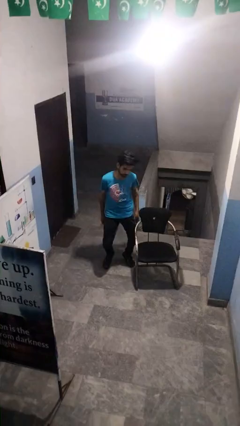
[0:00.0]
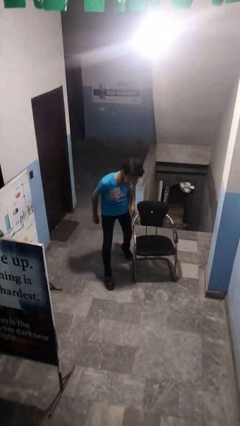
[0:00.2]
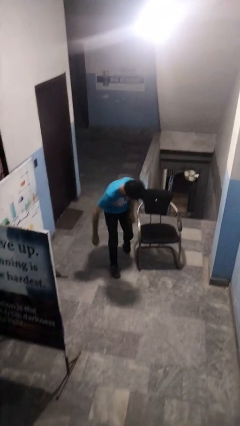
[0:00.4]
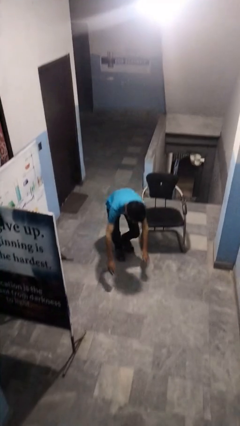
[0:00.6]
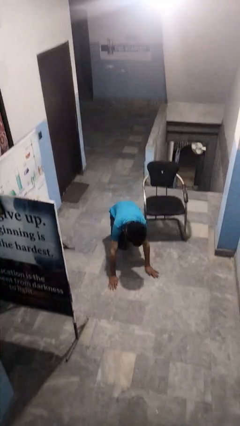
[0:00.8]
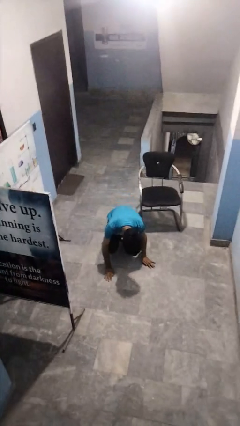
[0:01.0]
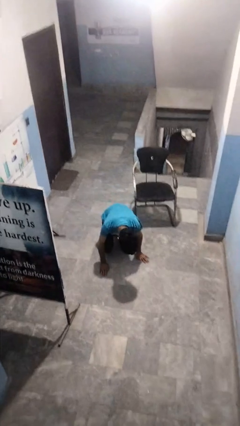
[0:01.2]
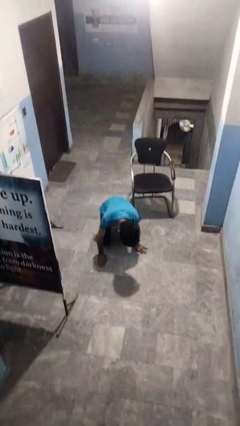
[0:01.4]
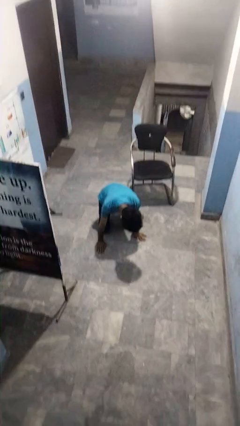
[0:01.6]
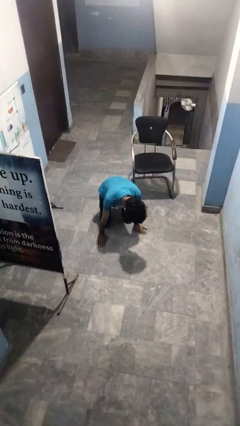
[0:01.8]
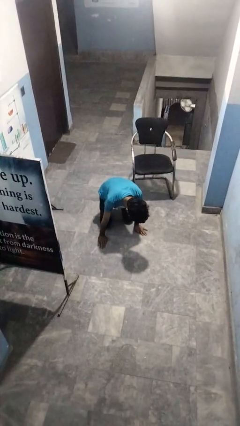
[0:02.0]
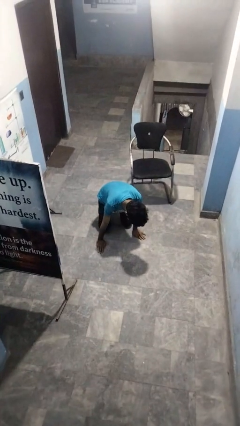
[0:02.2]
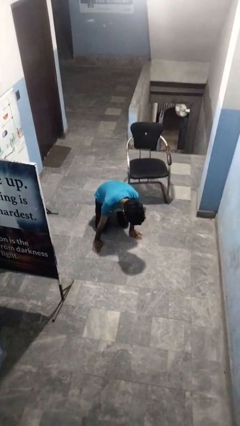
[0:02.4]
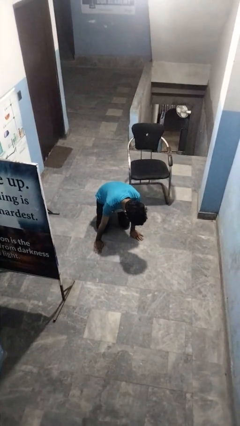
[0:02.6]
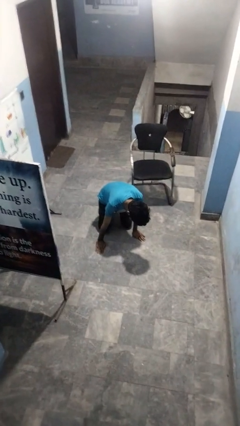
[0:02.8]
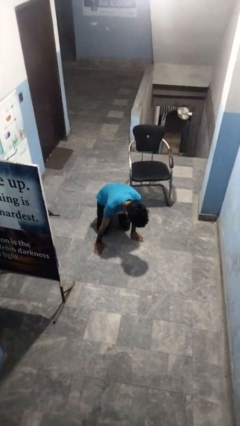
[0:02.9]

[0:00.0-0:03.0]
person trips on object on floor

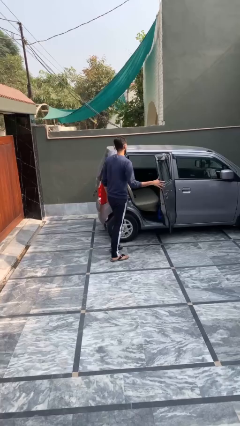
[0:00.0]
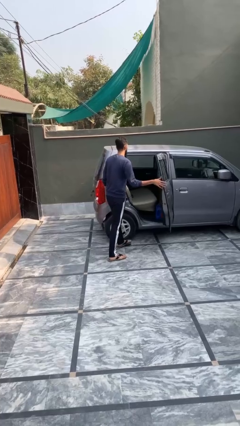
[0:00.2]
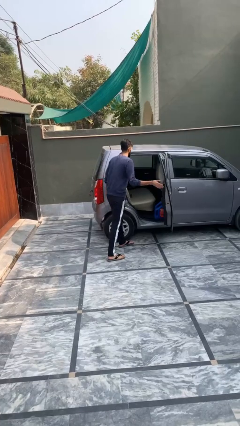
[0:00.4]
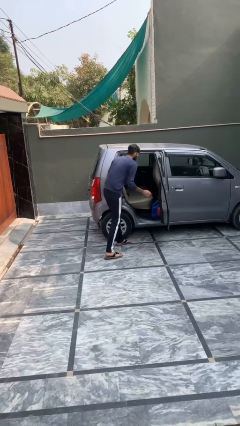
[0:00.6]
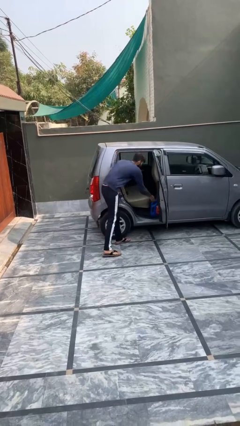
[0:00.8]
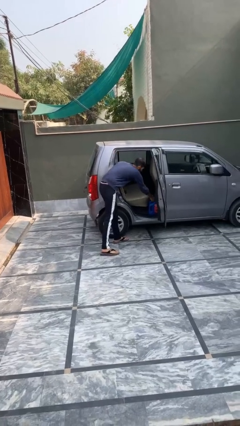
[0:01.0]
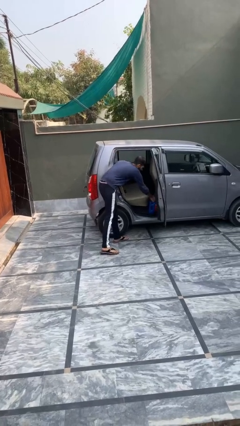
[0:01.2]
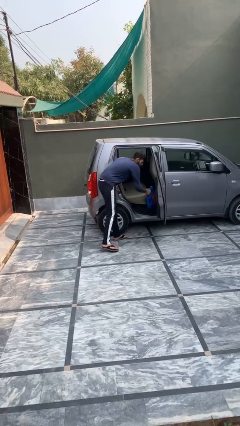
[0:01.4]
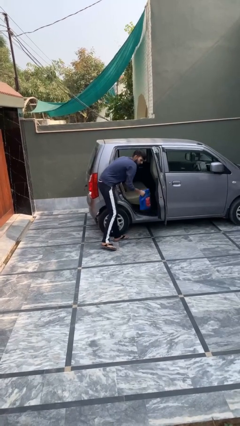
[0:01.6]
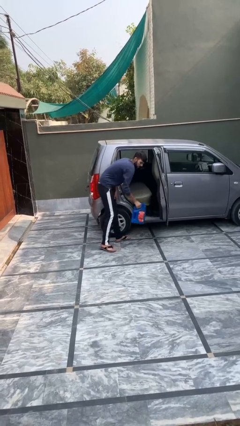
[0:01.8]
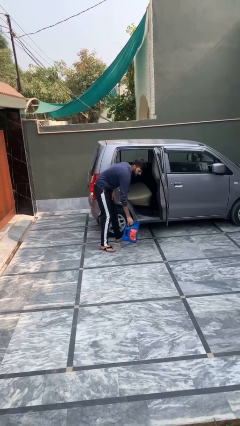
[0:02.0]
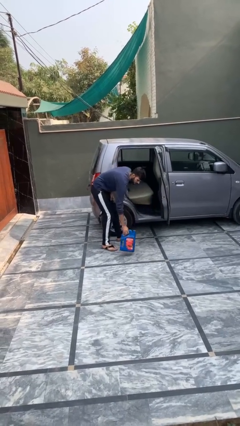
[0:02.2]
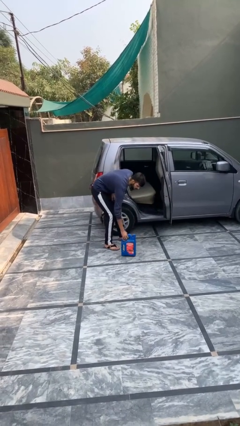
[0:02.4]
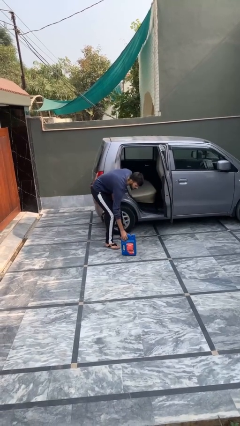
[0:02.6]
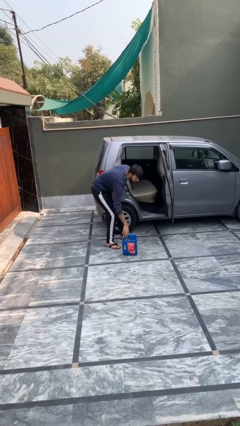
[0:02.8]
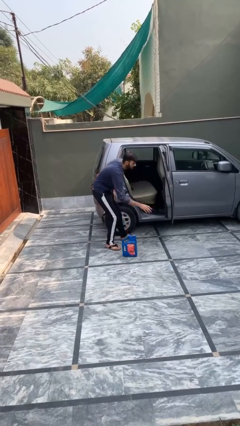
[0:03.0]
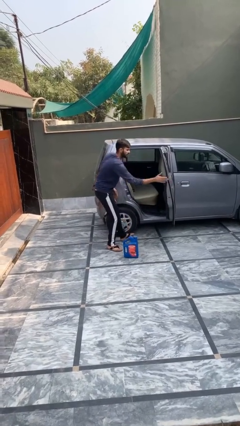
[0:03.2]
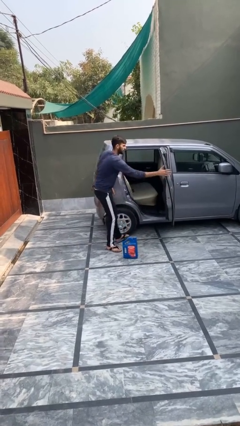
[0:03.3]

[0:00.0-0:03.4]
person unloads car

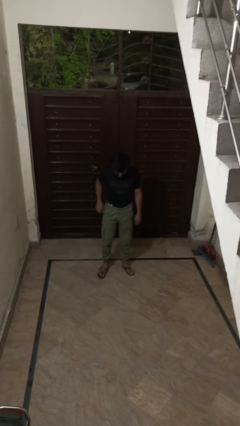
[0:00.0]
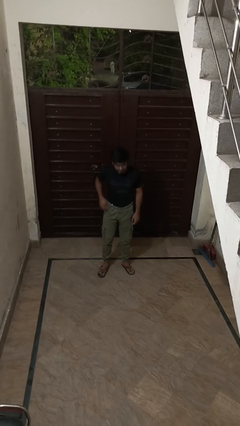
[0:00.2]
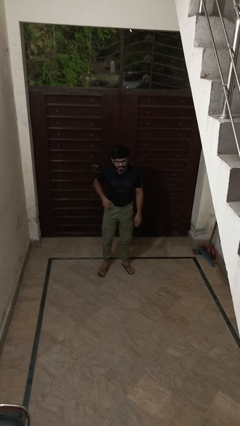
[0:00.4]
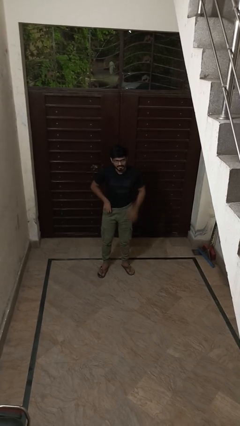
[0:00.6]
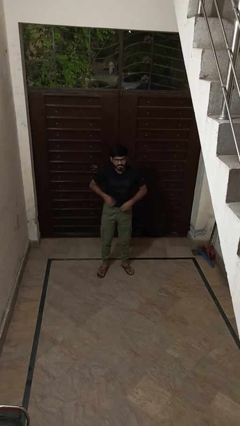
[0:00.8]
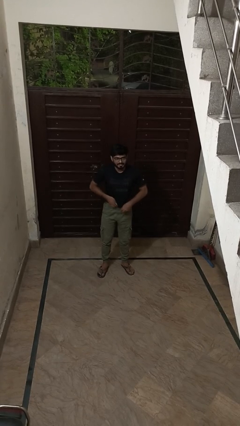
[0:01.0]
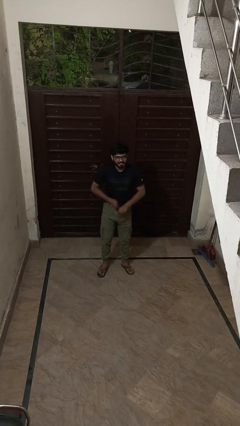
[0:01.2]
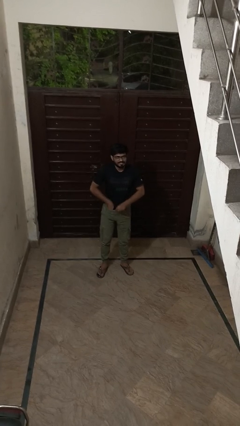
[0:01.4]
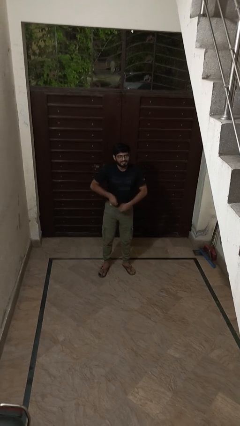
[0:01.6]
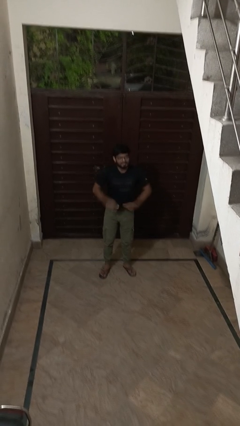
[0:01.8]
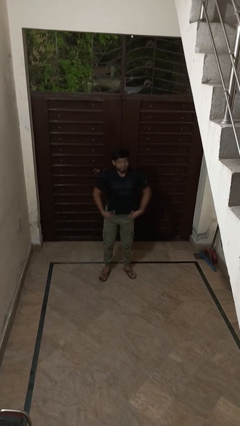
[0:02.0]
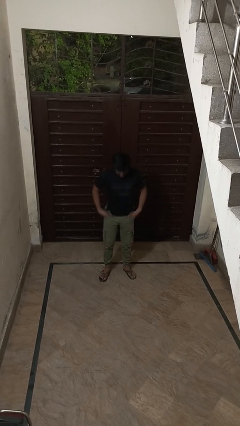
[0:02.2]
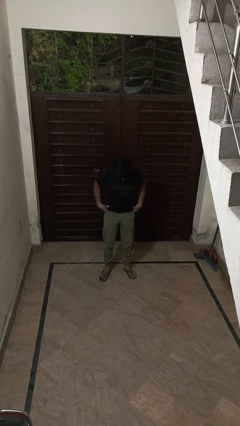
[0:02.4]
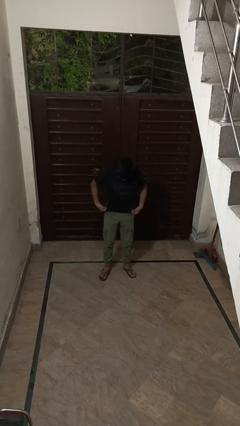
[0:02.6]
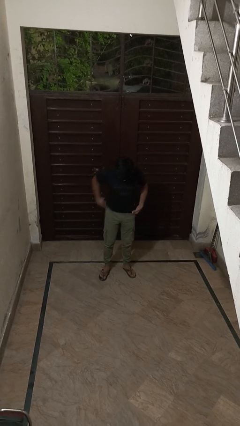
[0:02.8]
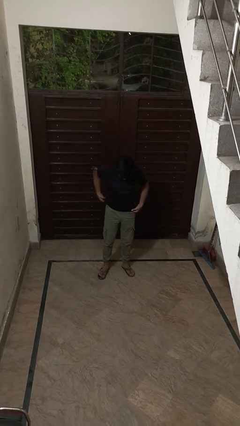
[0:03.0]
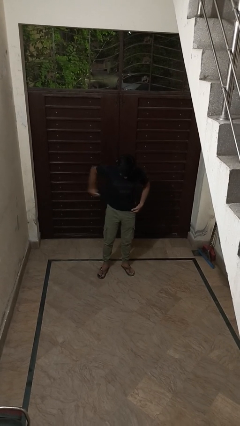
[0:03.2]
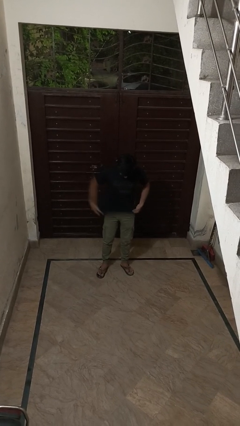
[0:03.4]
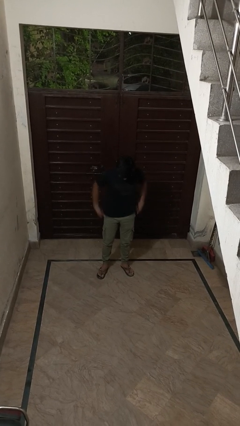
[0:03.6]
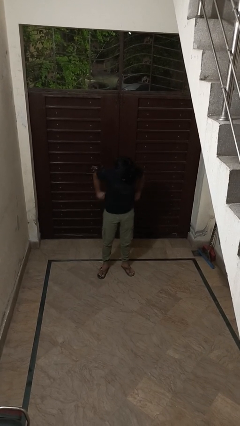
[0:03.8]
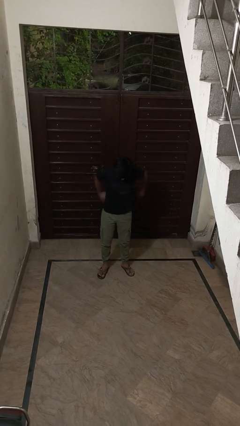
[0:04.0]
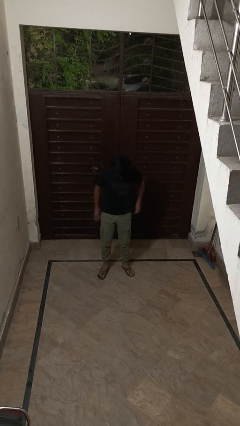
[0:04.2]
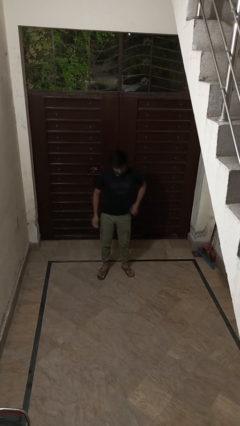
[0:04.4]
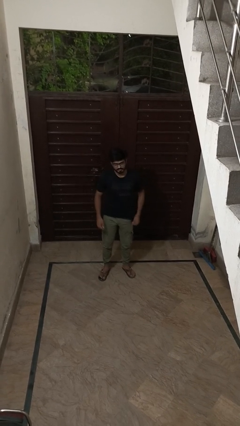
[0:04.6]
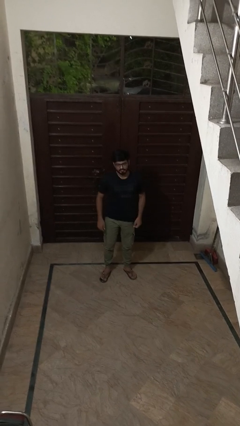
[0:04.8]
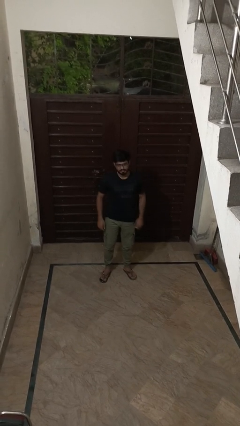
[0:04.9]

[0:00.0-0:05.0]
person untucks shirt

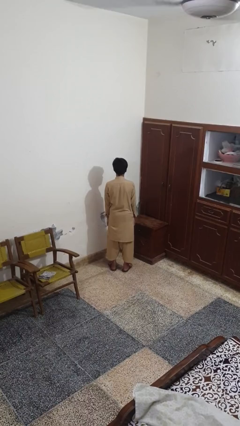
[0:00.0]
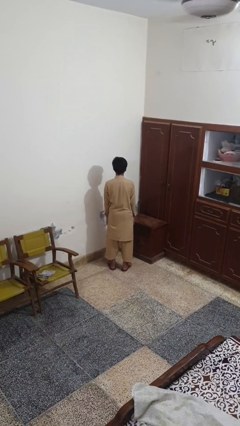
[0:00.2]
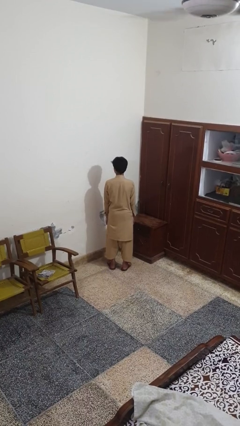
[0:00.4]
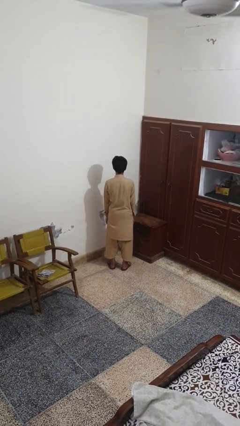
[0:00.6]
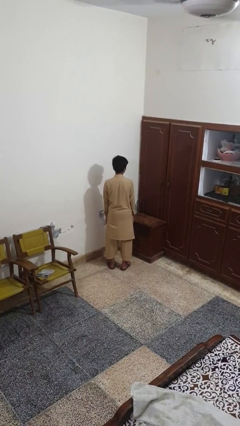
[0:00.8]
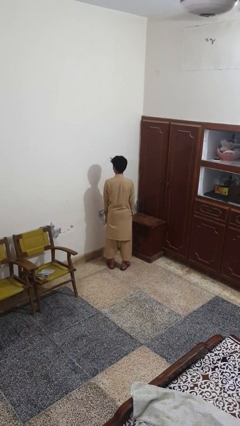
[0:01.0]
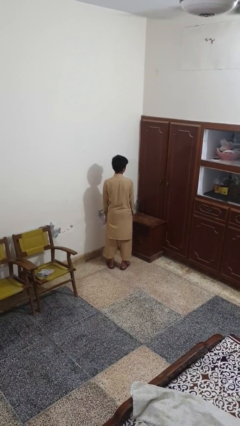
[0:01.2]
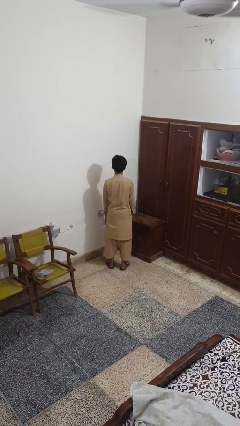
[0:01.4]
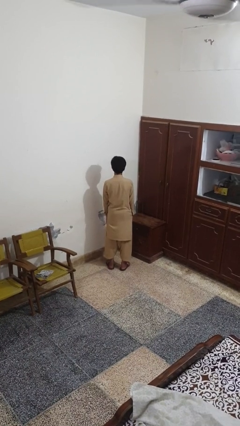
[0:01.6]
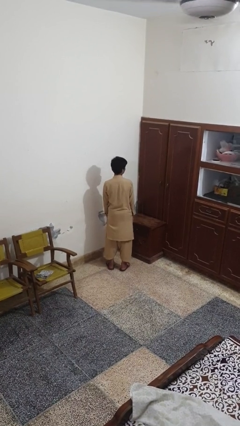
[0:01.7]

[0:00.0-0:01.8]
person shakes head

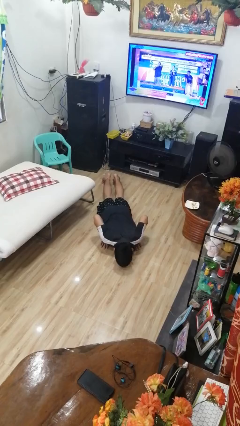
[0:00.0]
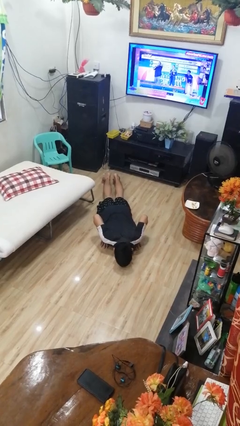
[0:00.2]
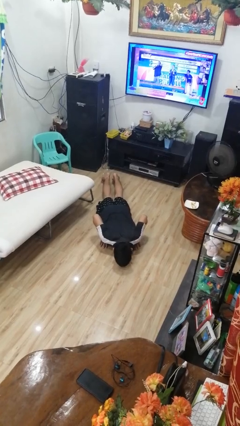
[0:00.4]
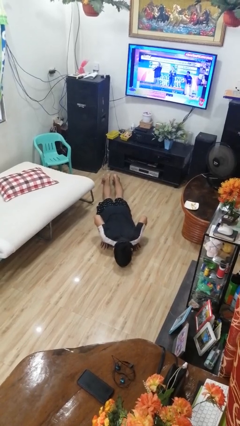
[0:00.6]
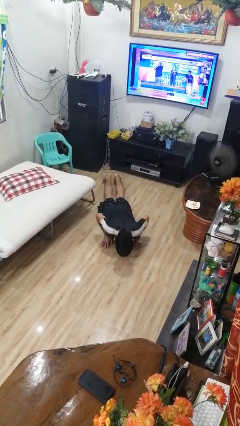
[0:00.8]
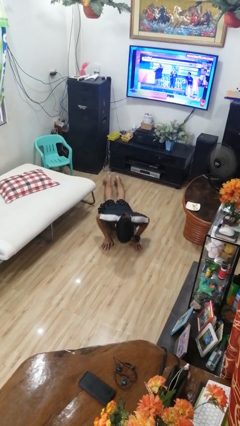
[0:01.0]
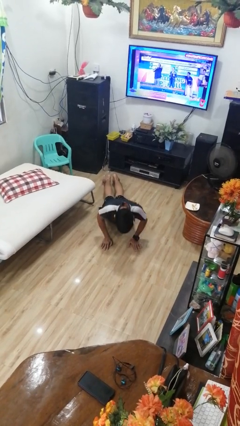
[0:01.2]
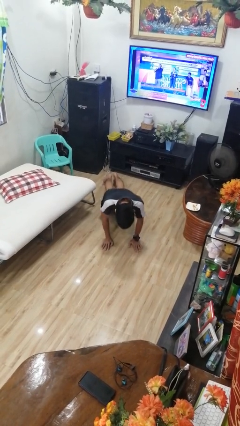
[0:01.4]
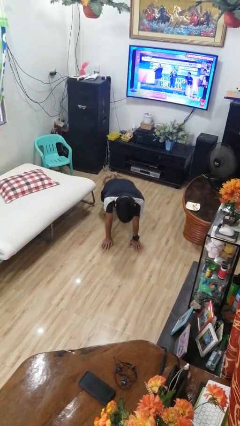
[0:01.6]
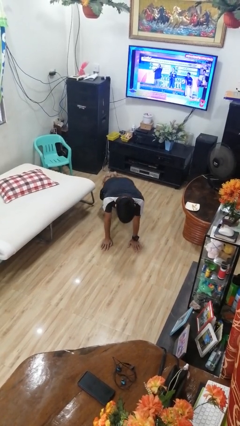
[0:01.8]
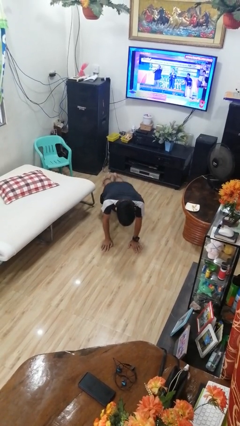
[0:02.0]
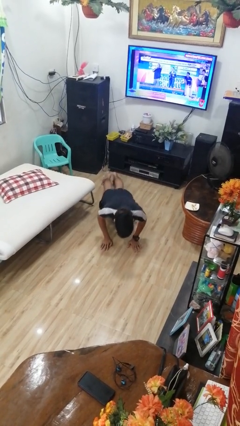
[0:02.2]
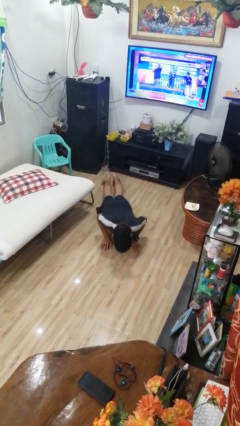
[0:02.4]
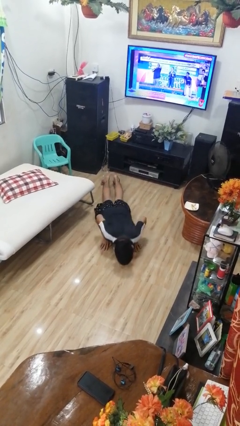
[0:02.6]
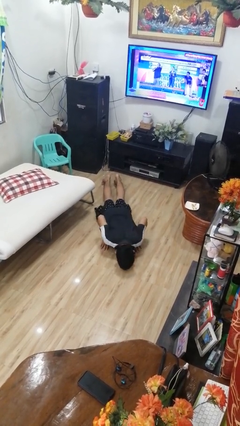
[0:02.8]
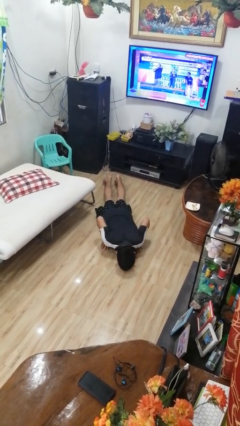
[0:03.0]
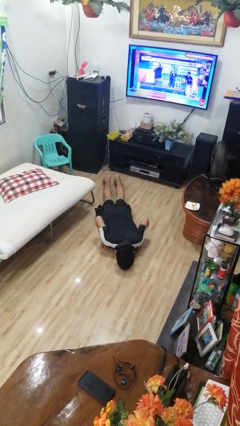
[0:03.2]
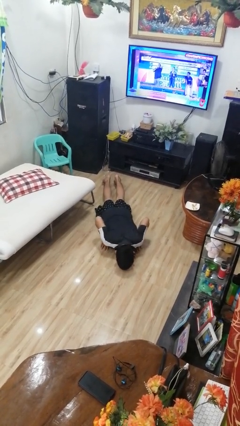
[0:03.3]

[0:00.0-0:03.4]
person exercises with pushup

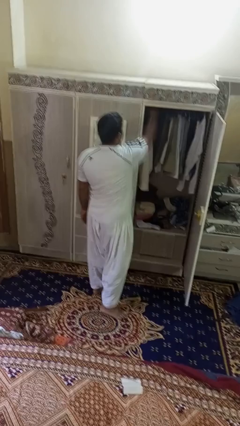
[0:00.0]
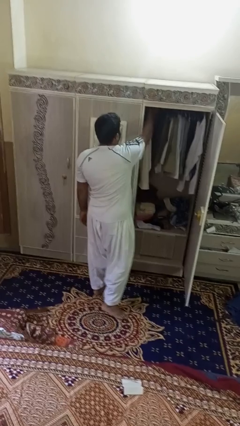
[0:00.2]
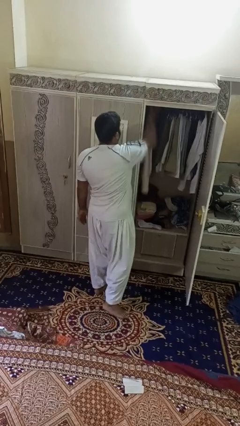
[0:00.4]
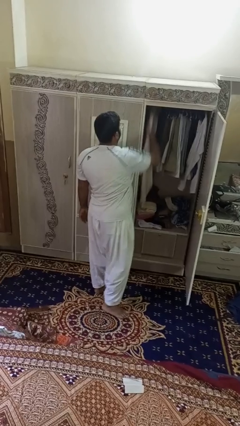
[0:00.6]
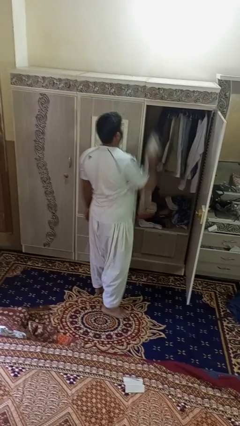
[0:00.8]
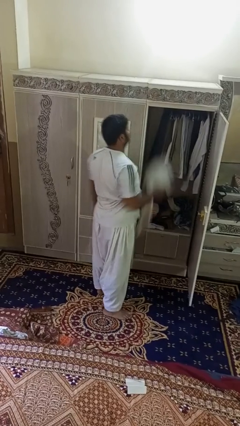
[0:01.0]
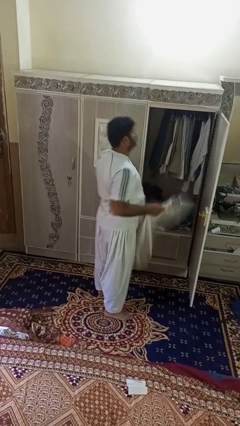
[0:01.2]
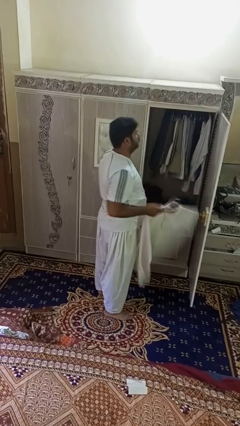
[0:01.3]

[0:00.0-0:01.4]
person takes clothes from closet
